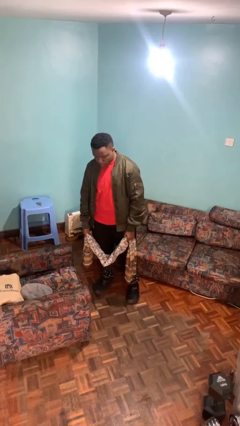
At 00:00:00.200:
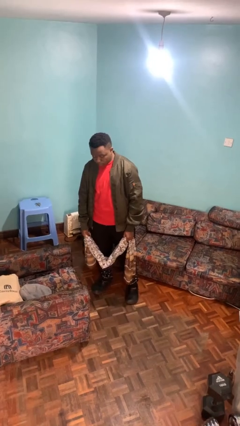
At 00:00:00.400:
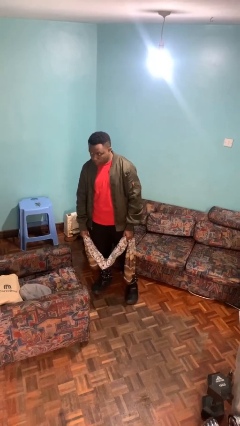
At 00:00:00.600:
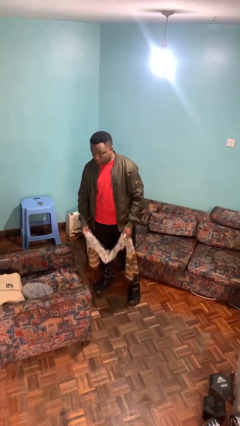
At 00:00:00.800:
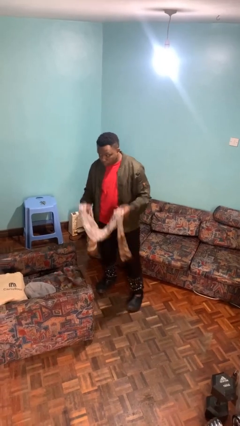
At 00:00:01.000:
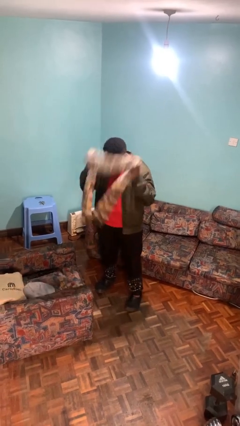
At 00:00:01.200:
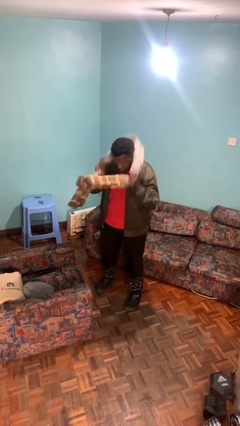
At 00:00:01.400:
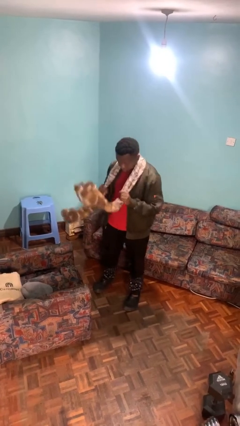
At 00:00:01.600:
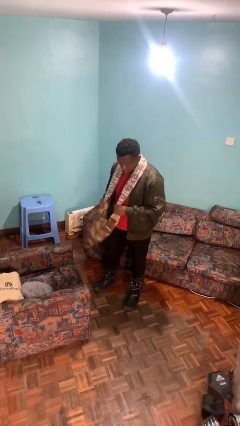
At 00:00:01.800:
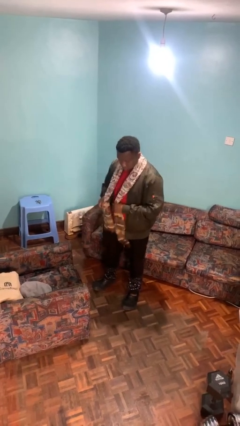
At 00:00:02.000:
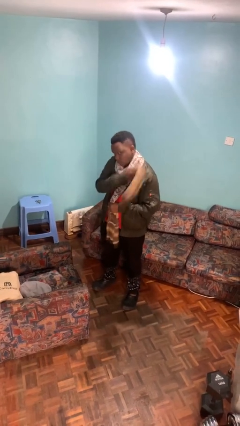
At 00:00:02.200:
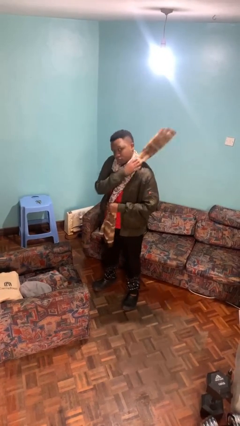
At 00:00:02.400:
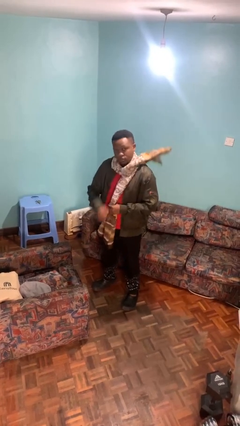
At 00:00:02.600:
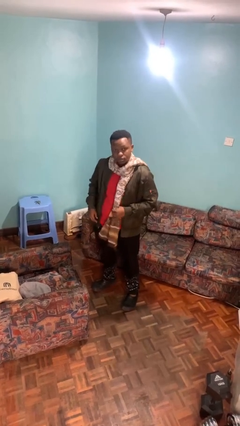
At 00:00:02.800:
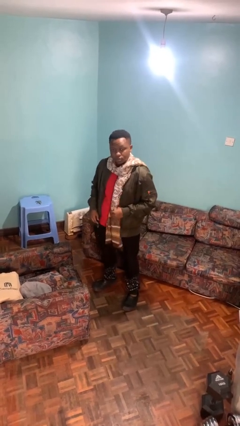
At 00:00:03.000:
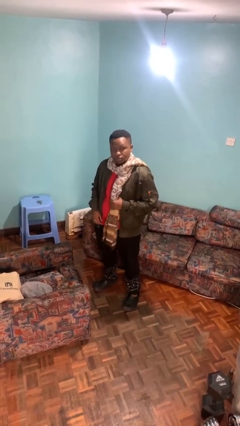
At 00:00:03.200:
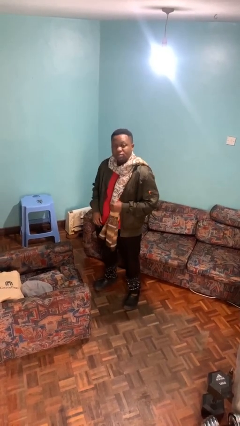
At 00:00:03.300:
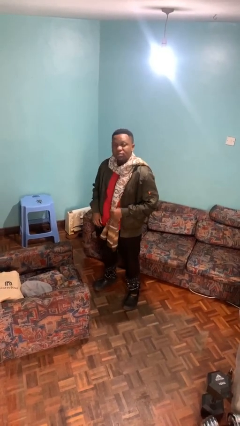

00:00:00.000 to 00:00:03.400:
person puts on scarf

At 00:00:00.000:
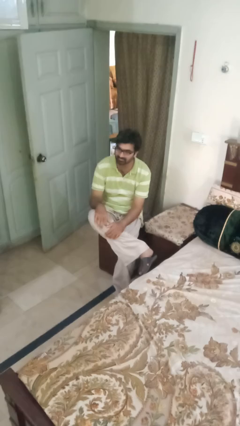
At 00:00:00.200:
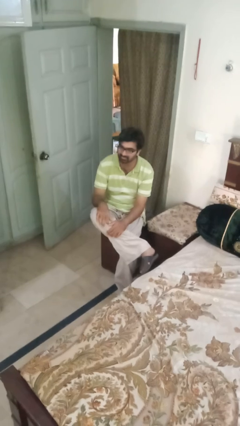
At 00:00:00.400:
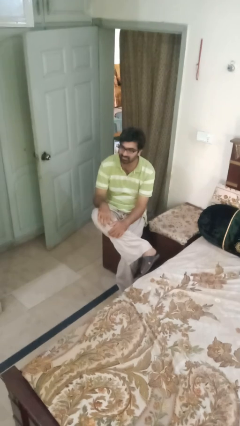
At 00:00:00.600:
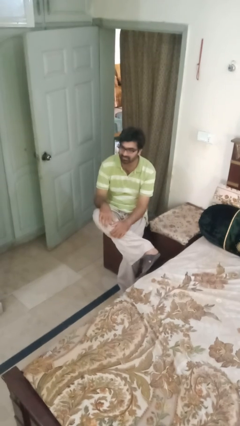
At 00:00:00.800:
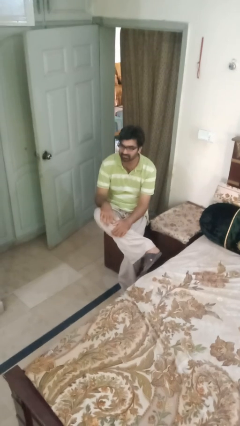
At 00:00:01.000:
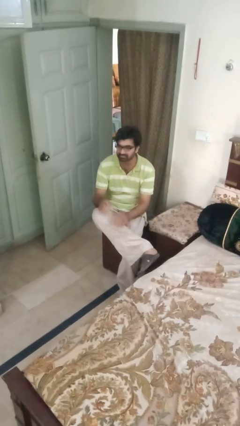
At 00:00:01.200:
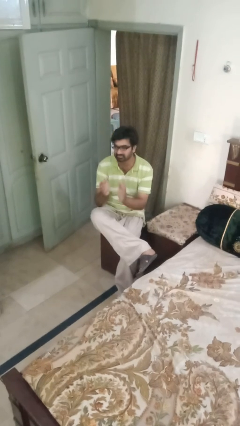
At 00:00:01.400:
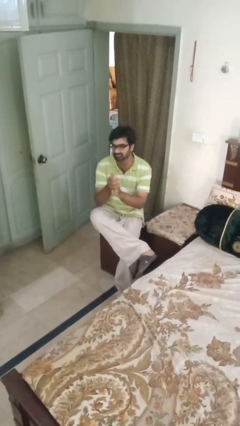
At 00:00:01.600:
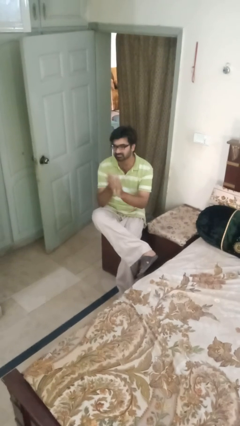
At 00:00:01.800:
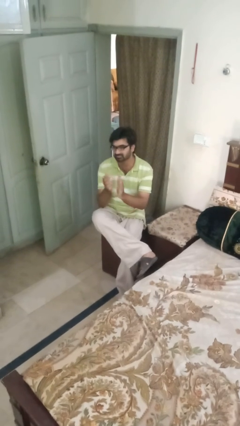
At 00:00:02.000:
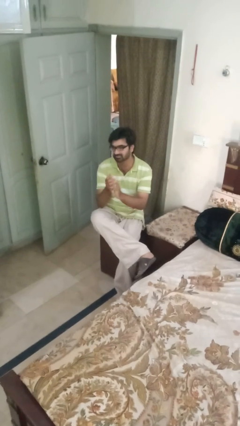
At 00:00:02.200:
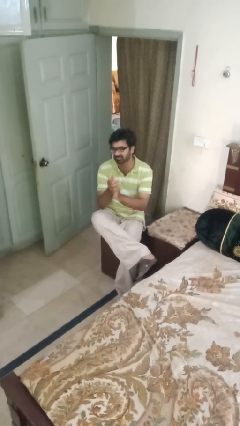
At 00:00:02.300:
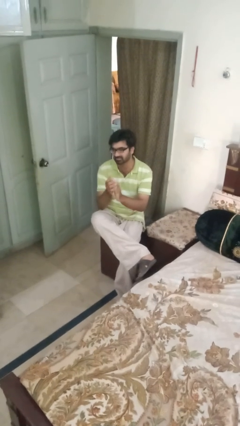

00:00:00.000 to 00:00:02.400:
person claps hands

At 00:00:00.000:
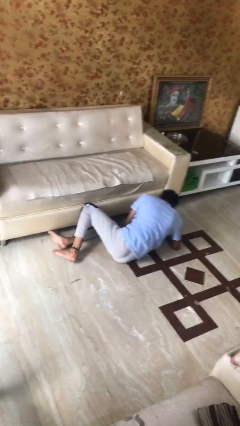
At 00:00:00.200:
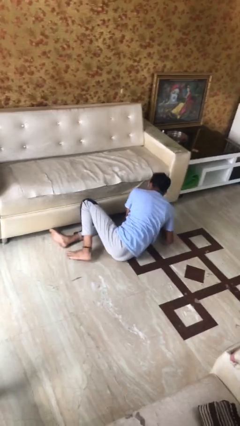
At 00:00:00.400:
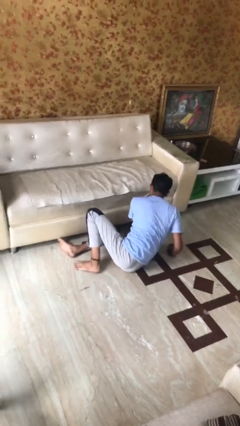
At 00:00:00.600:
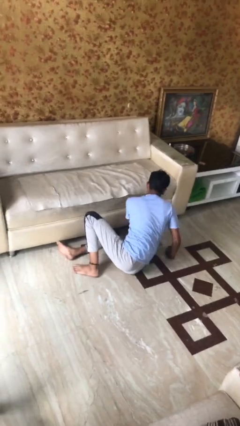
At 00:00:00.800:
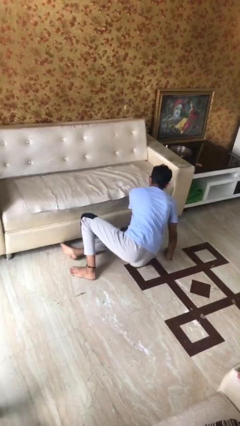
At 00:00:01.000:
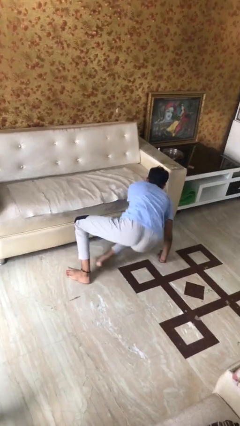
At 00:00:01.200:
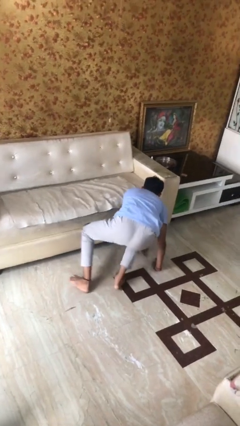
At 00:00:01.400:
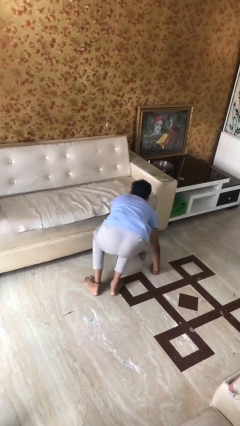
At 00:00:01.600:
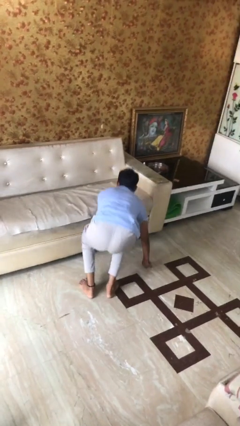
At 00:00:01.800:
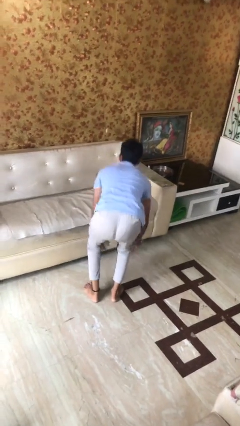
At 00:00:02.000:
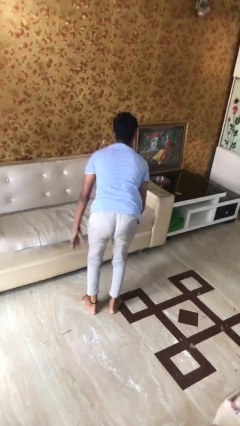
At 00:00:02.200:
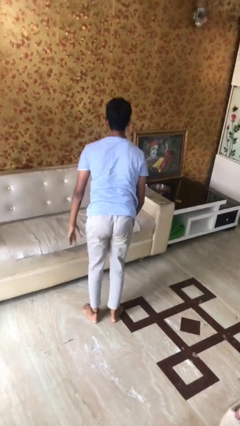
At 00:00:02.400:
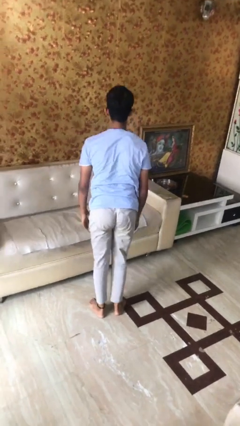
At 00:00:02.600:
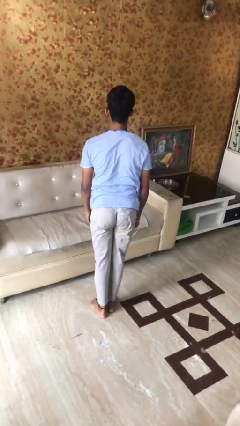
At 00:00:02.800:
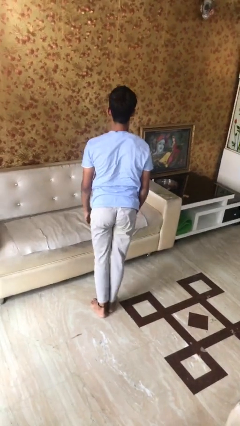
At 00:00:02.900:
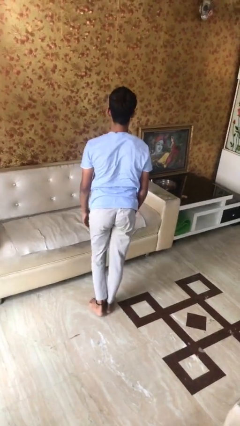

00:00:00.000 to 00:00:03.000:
person stands up from floor

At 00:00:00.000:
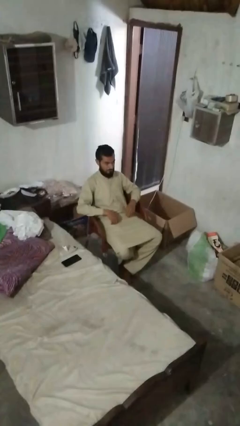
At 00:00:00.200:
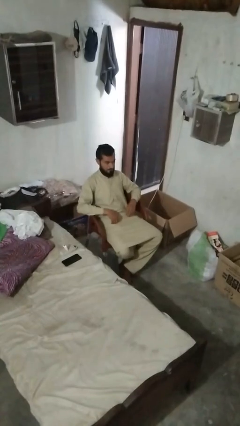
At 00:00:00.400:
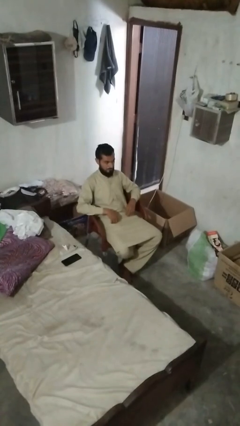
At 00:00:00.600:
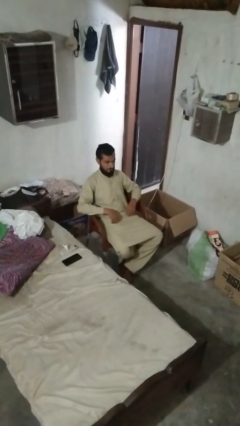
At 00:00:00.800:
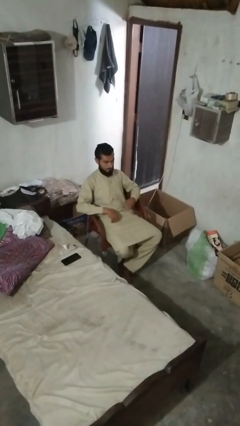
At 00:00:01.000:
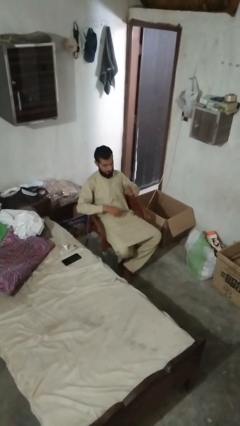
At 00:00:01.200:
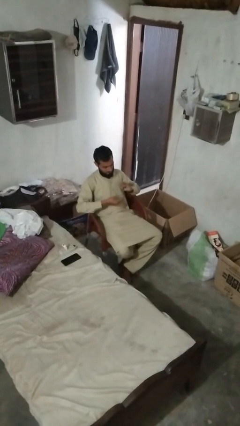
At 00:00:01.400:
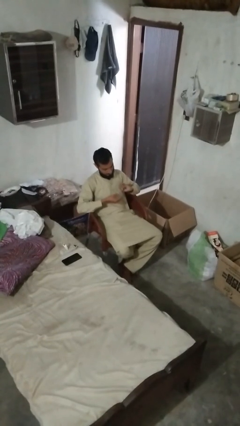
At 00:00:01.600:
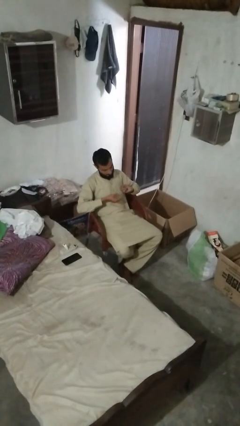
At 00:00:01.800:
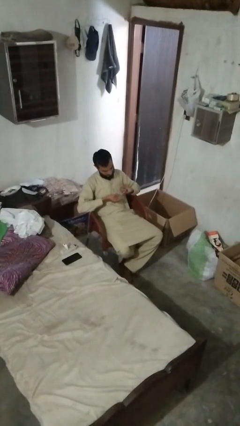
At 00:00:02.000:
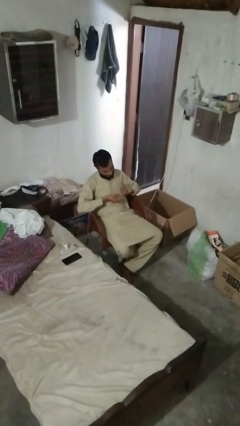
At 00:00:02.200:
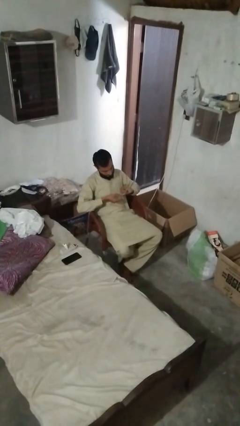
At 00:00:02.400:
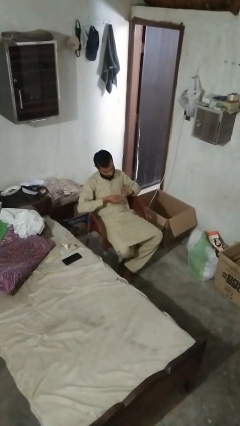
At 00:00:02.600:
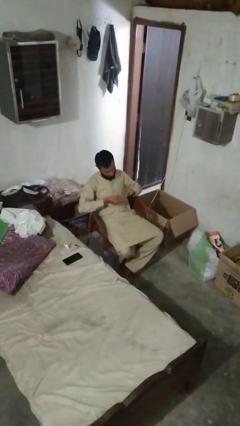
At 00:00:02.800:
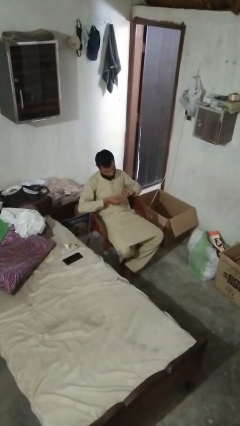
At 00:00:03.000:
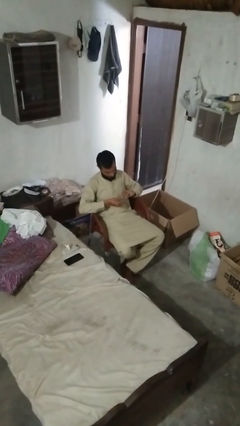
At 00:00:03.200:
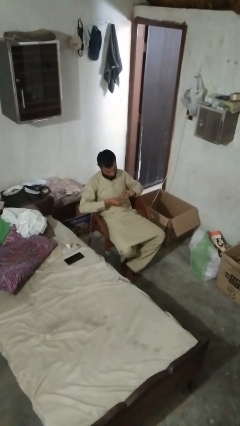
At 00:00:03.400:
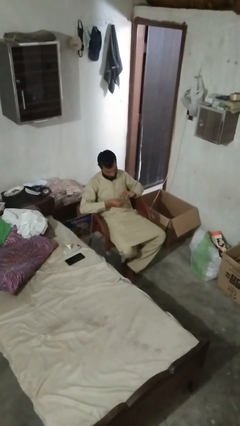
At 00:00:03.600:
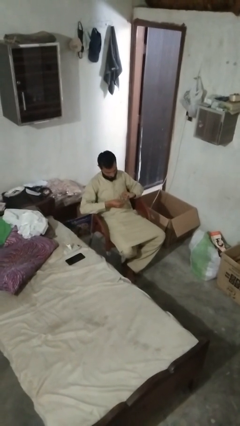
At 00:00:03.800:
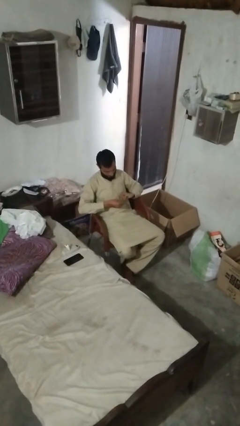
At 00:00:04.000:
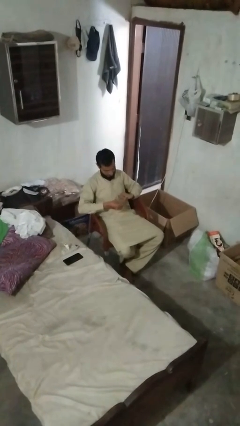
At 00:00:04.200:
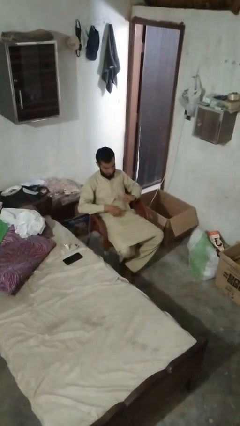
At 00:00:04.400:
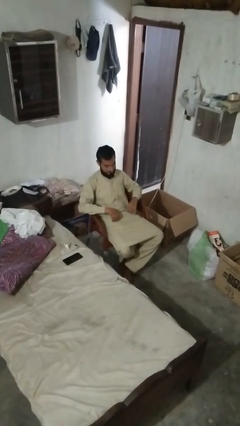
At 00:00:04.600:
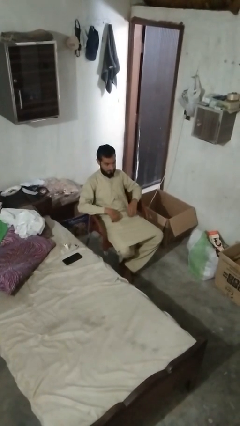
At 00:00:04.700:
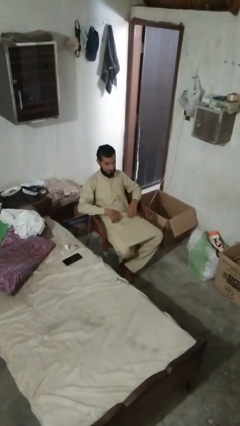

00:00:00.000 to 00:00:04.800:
person clips fingernails

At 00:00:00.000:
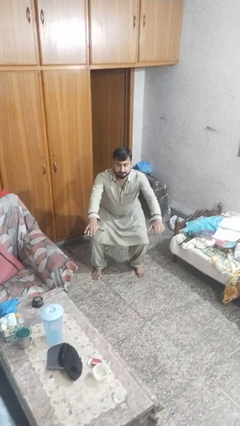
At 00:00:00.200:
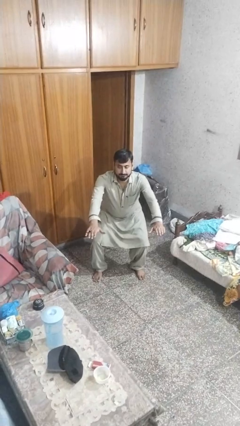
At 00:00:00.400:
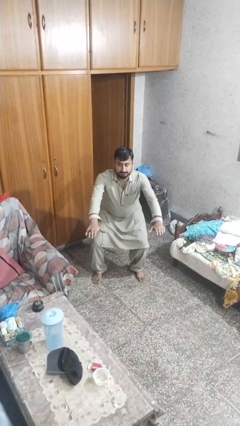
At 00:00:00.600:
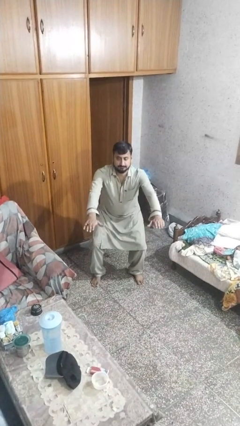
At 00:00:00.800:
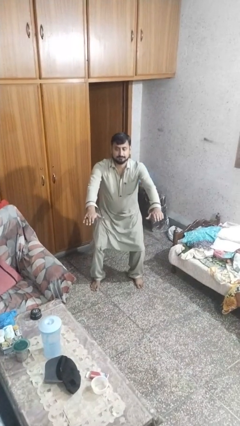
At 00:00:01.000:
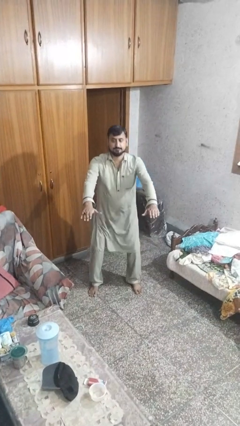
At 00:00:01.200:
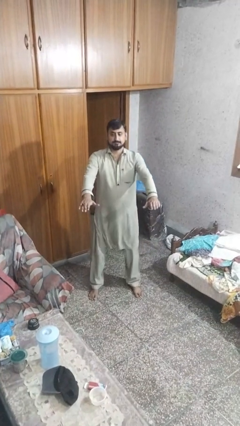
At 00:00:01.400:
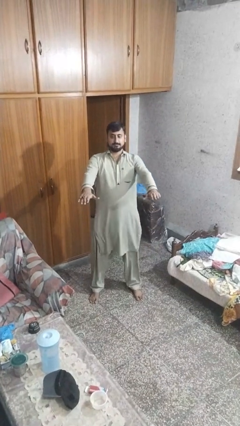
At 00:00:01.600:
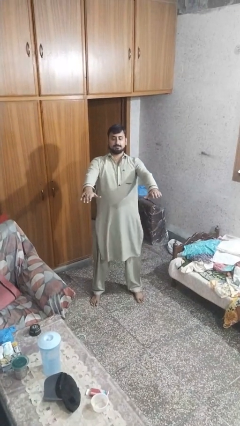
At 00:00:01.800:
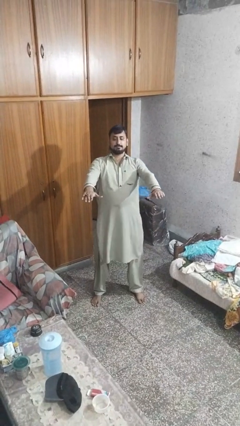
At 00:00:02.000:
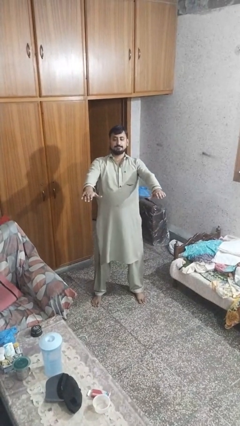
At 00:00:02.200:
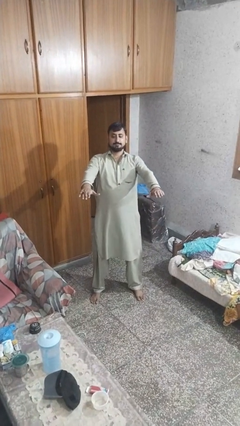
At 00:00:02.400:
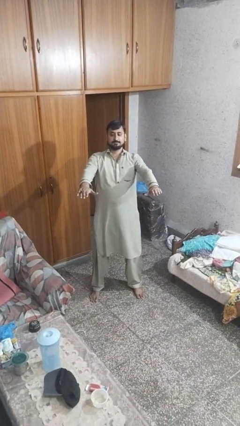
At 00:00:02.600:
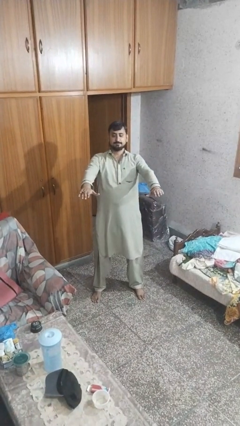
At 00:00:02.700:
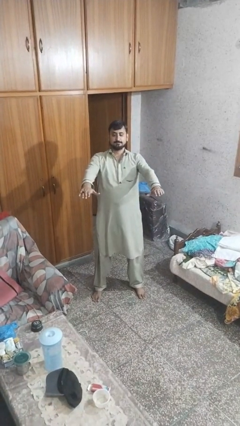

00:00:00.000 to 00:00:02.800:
person stands up

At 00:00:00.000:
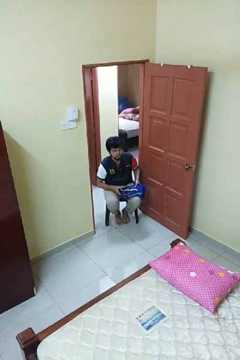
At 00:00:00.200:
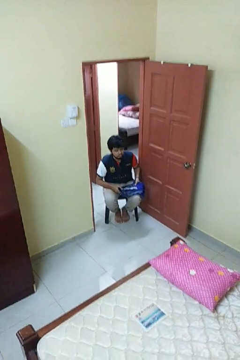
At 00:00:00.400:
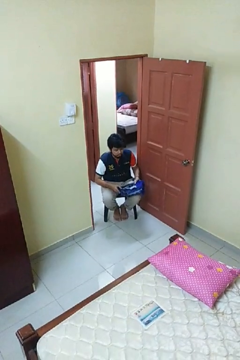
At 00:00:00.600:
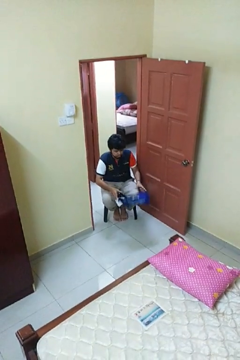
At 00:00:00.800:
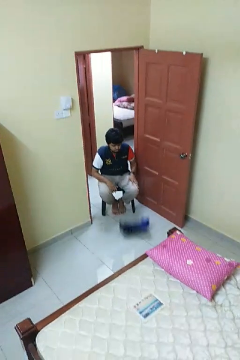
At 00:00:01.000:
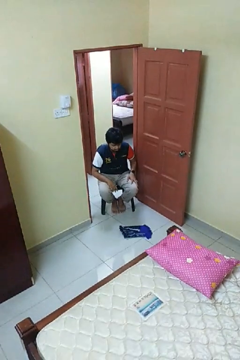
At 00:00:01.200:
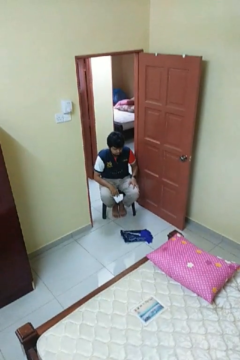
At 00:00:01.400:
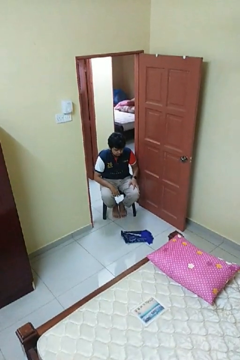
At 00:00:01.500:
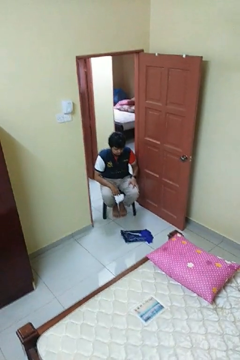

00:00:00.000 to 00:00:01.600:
person drops object
